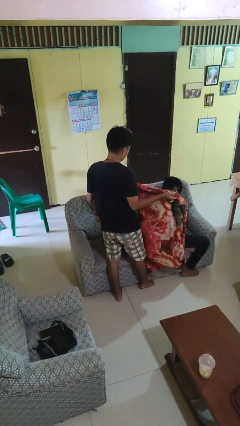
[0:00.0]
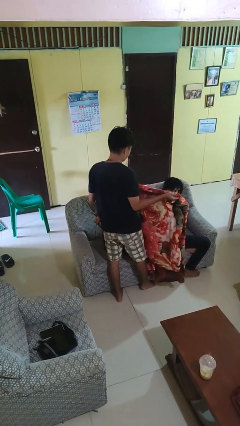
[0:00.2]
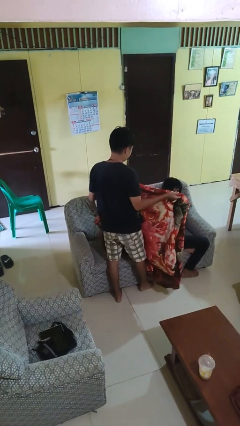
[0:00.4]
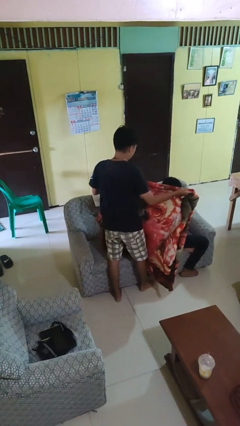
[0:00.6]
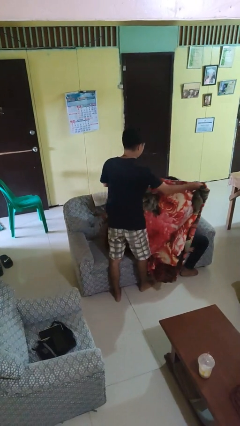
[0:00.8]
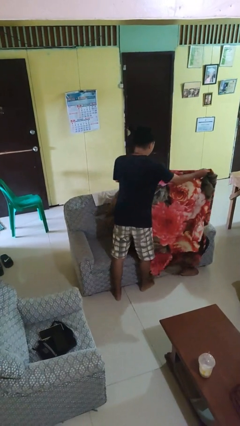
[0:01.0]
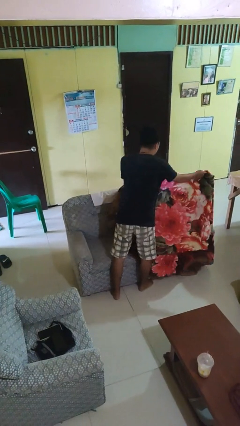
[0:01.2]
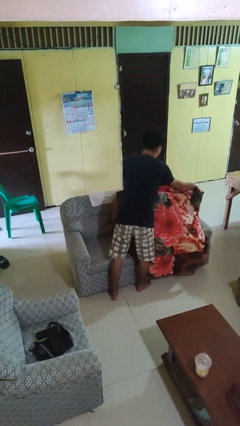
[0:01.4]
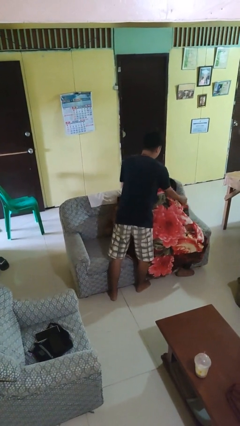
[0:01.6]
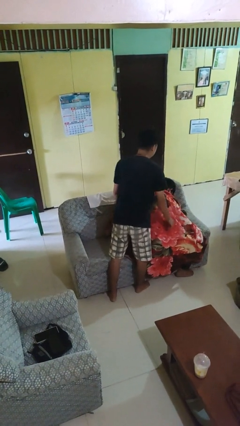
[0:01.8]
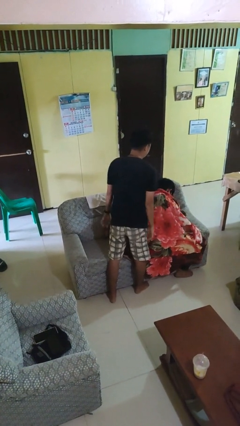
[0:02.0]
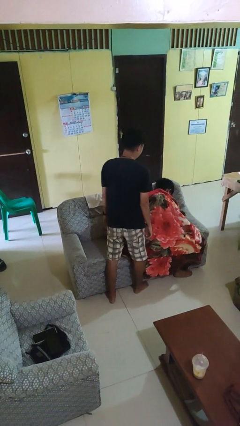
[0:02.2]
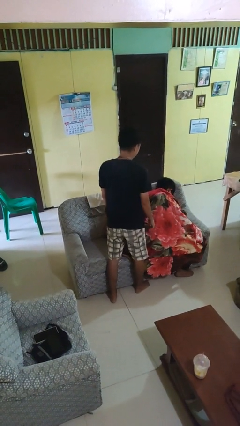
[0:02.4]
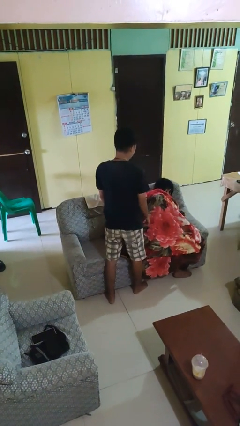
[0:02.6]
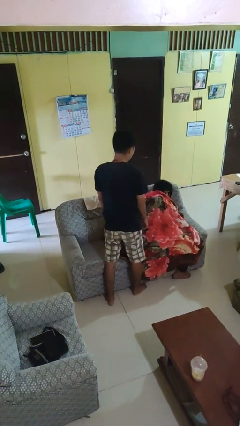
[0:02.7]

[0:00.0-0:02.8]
person covers friend with blanket

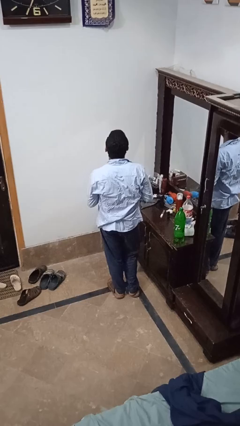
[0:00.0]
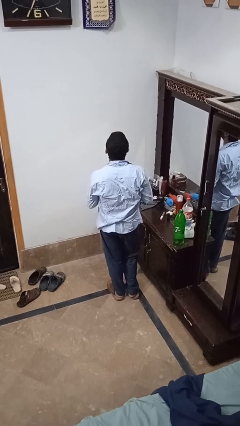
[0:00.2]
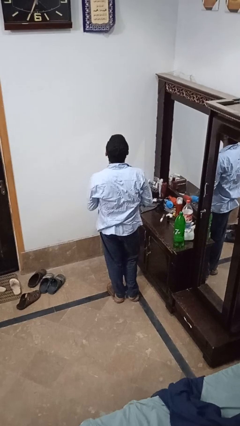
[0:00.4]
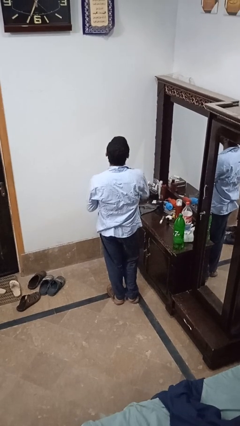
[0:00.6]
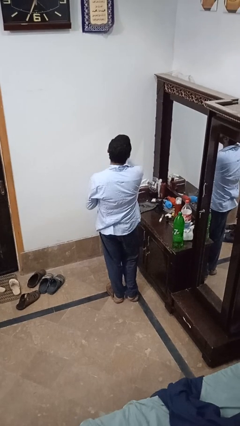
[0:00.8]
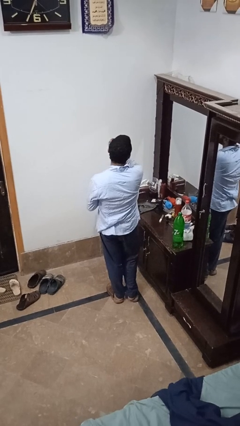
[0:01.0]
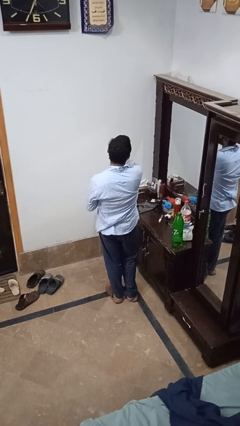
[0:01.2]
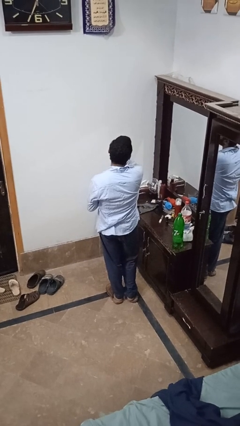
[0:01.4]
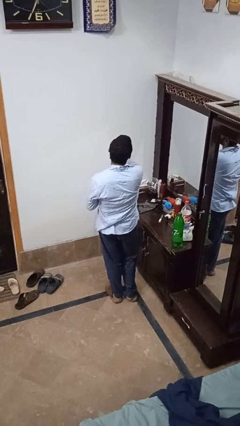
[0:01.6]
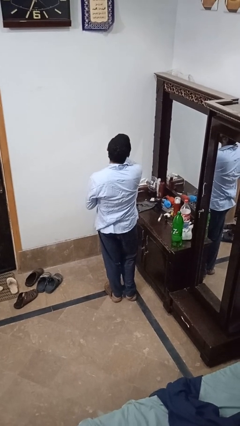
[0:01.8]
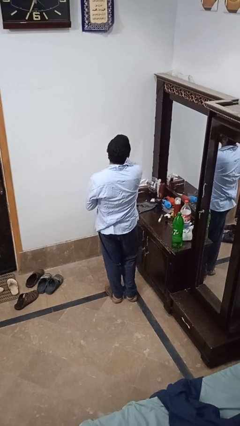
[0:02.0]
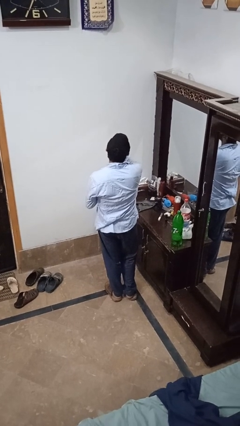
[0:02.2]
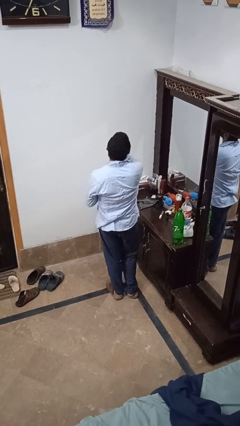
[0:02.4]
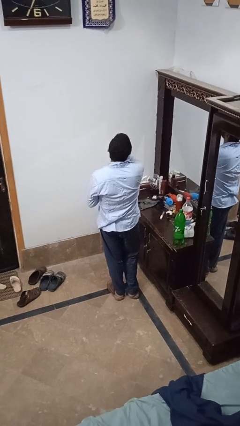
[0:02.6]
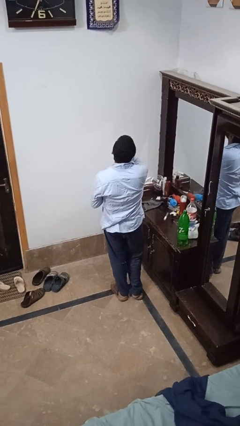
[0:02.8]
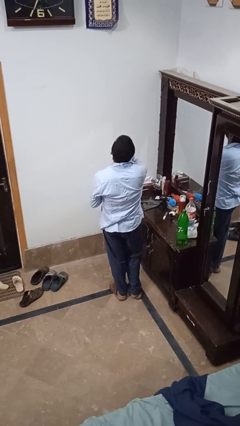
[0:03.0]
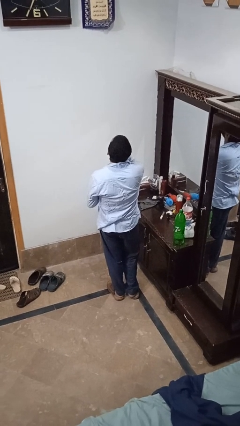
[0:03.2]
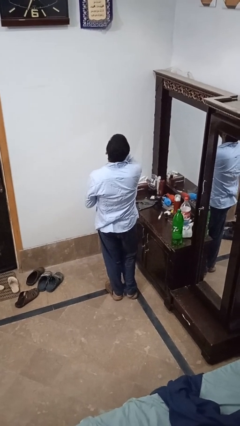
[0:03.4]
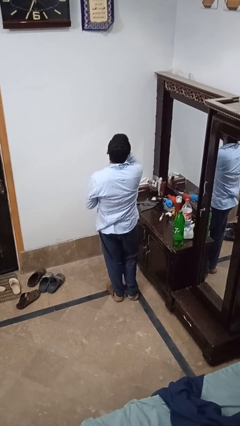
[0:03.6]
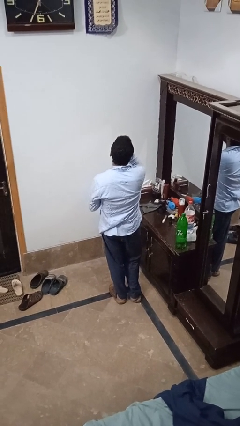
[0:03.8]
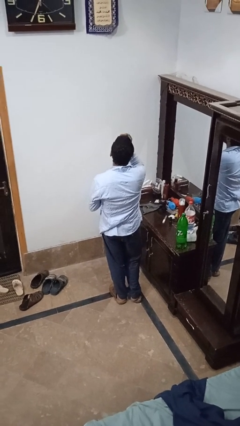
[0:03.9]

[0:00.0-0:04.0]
person applies foundation makeup

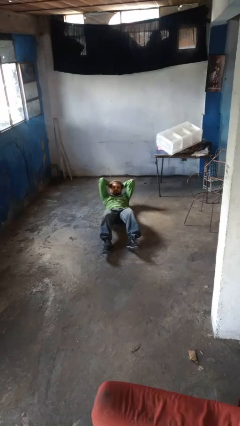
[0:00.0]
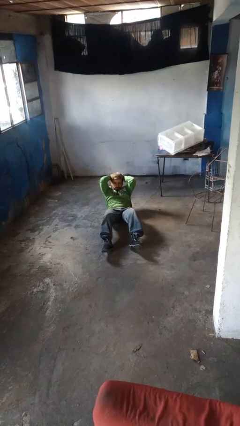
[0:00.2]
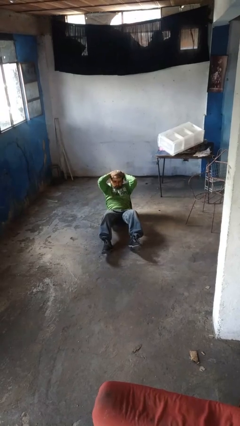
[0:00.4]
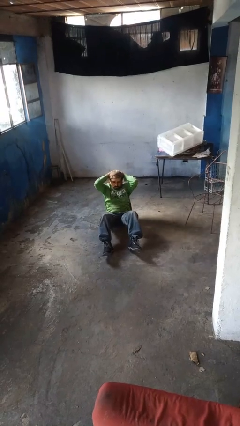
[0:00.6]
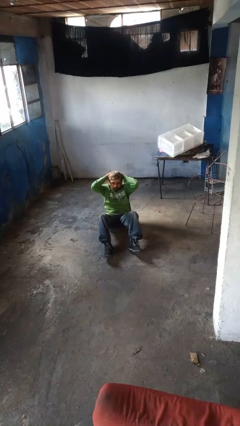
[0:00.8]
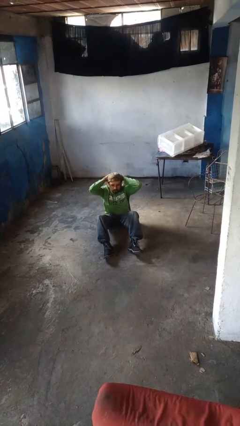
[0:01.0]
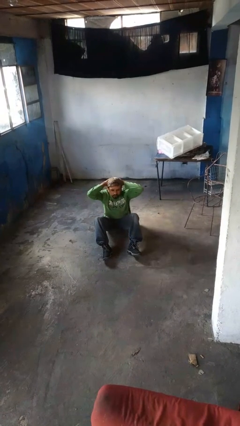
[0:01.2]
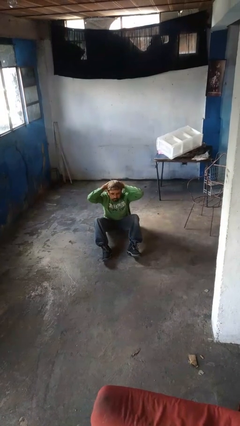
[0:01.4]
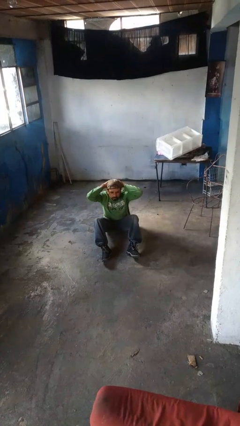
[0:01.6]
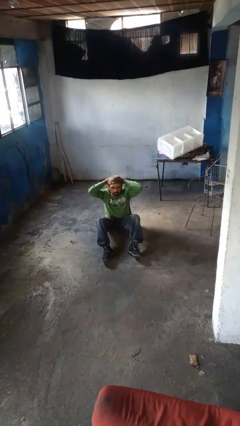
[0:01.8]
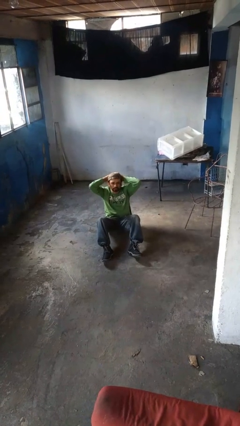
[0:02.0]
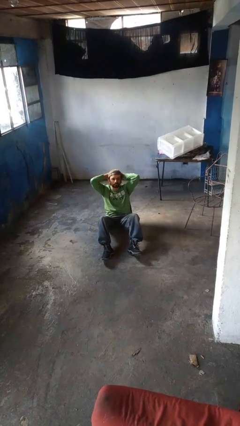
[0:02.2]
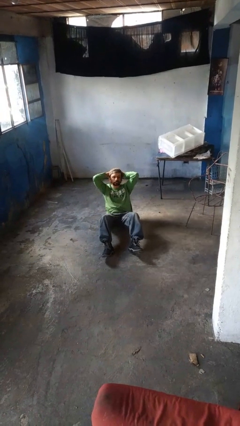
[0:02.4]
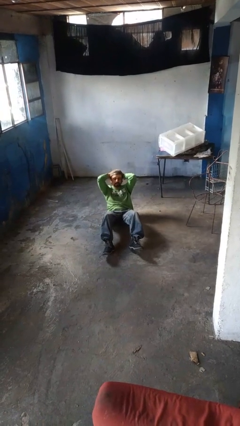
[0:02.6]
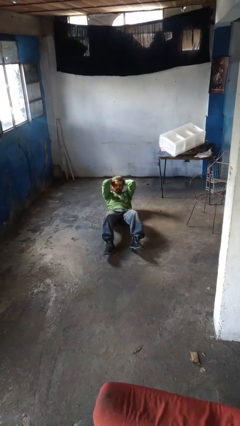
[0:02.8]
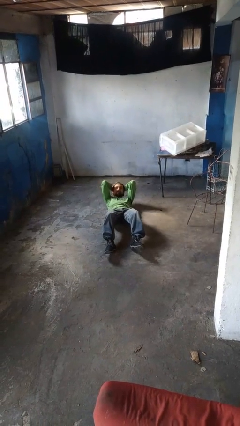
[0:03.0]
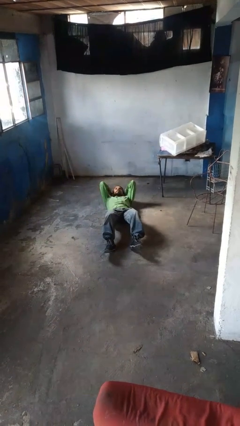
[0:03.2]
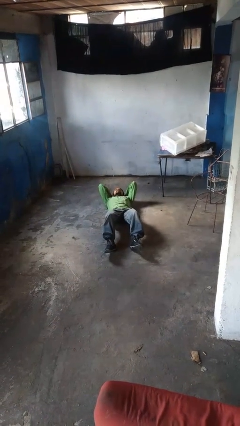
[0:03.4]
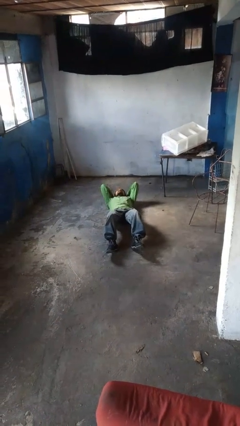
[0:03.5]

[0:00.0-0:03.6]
person exercises with situp

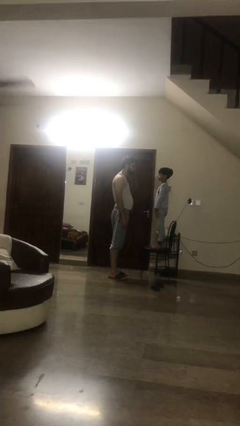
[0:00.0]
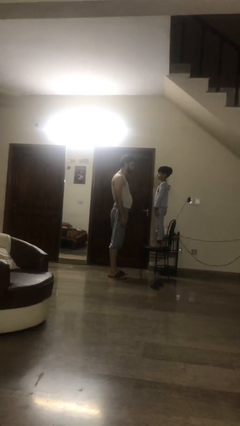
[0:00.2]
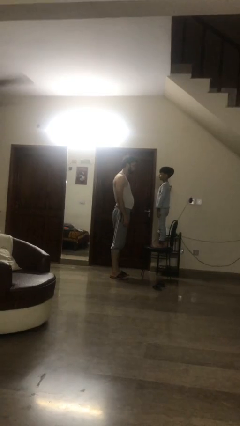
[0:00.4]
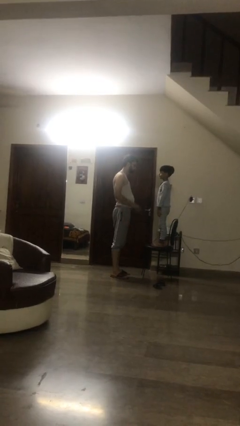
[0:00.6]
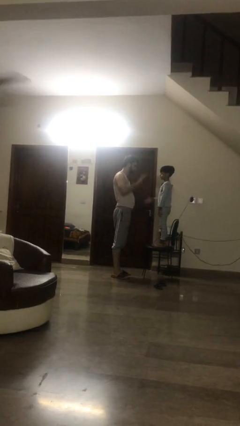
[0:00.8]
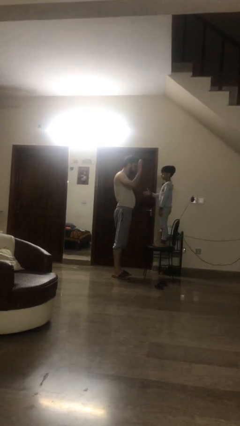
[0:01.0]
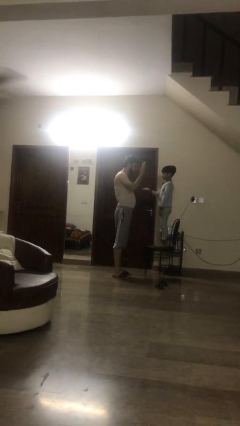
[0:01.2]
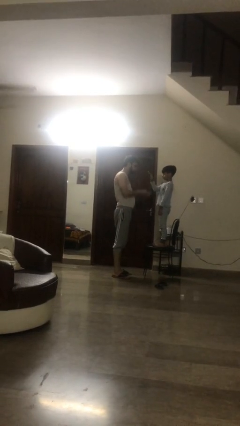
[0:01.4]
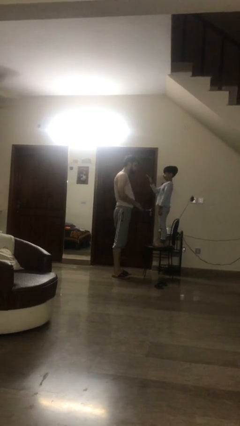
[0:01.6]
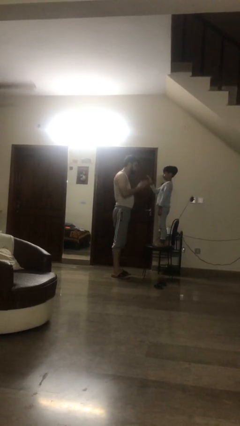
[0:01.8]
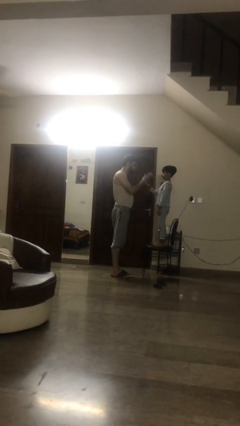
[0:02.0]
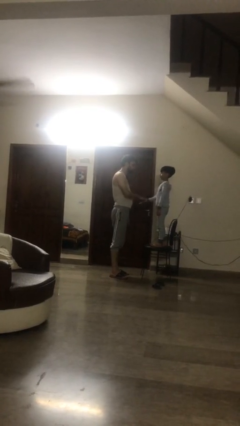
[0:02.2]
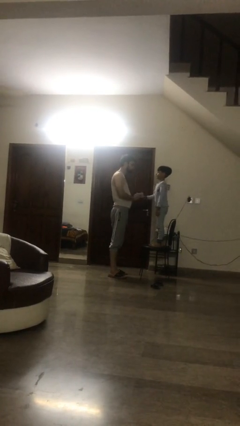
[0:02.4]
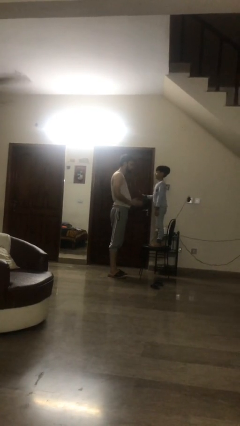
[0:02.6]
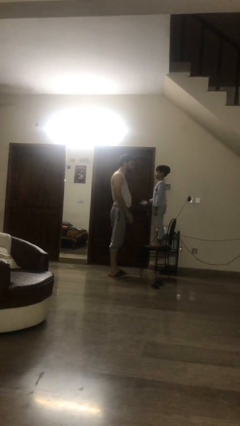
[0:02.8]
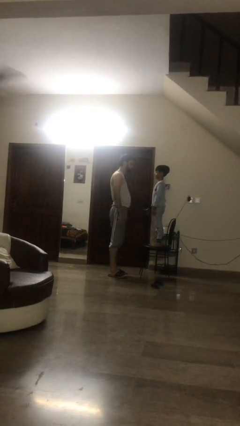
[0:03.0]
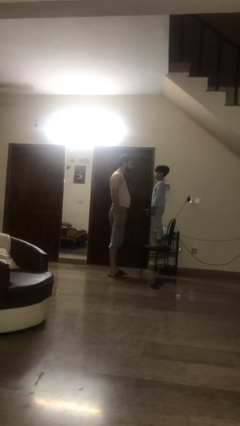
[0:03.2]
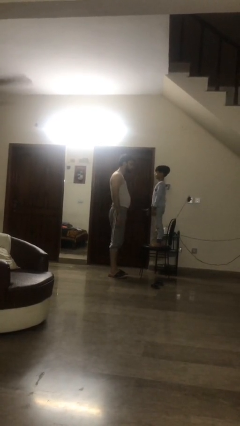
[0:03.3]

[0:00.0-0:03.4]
person highfives hand

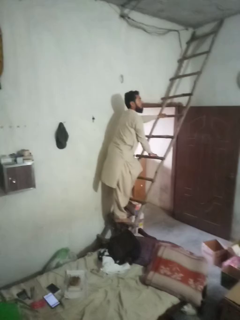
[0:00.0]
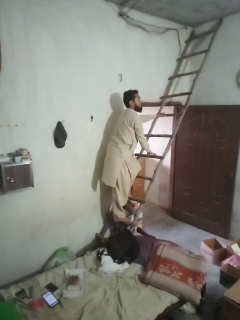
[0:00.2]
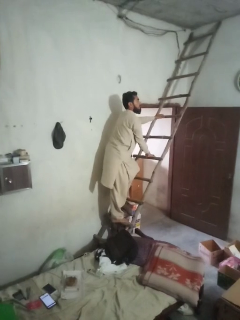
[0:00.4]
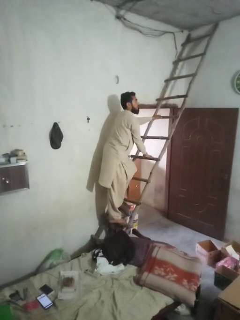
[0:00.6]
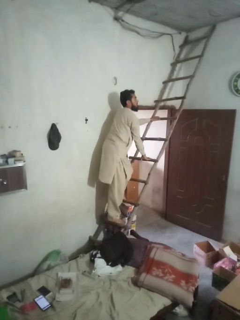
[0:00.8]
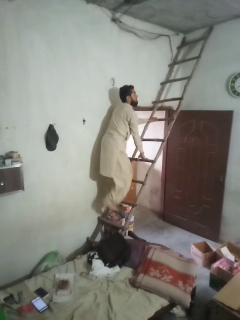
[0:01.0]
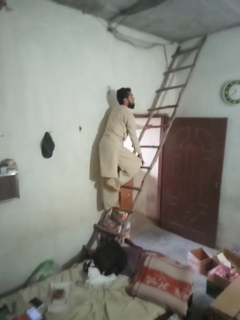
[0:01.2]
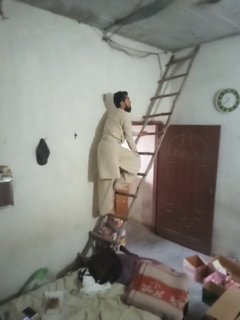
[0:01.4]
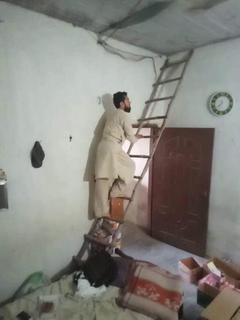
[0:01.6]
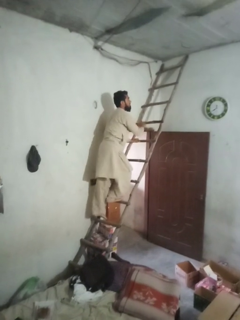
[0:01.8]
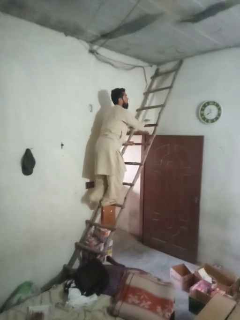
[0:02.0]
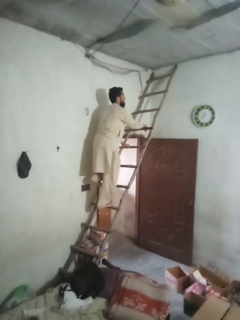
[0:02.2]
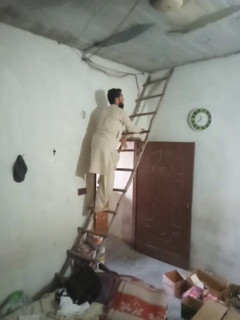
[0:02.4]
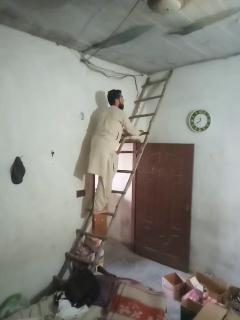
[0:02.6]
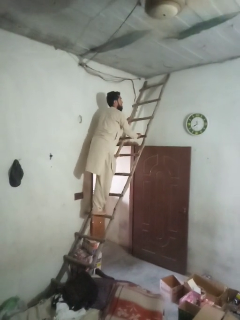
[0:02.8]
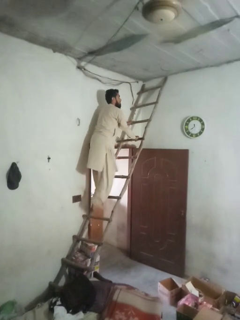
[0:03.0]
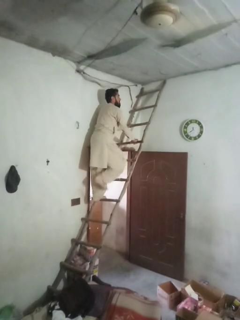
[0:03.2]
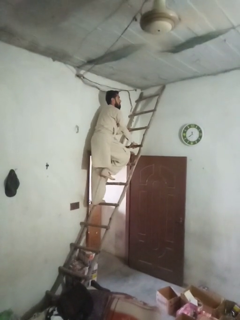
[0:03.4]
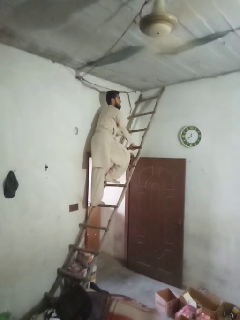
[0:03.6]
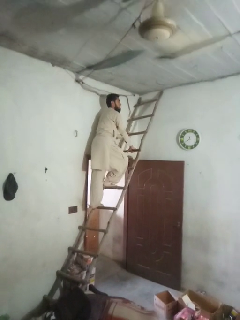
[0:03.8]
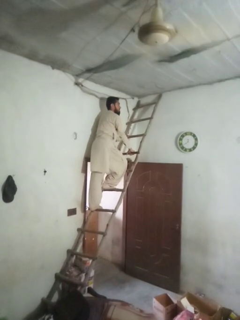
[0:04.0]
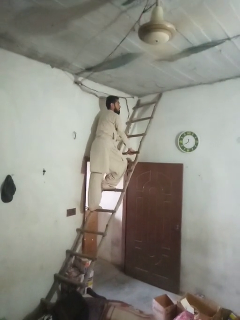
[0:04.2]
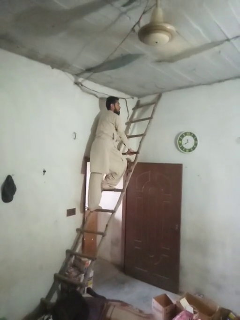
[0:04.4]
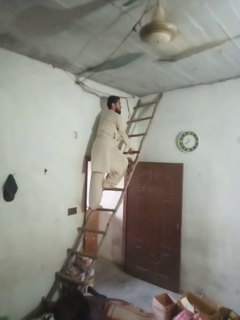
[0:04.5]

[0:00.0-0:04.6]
person climbs up ladder

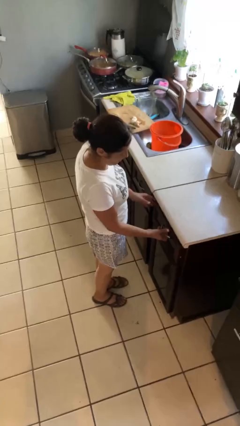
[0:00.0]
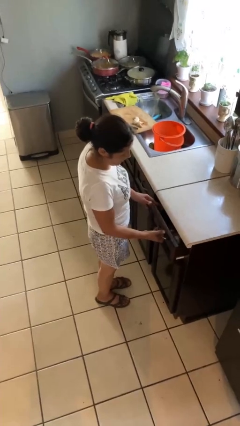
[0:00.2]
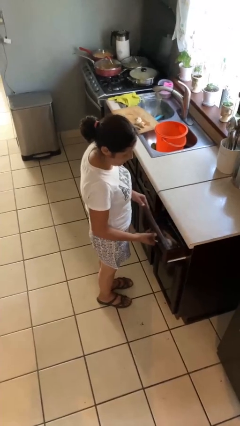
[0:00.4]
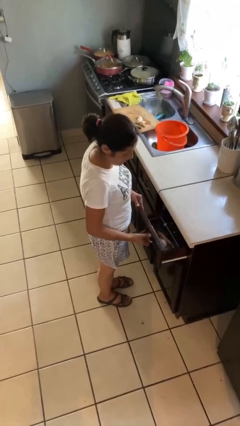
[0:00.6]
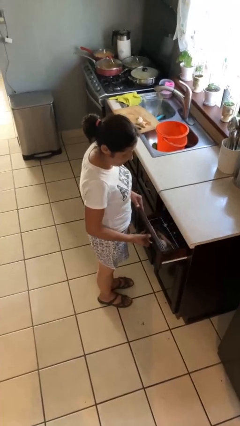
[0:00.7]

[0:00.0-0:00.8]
person opens kitchen drawer
